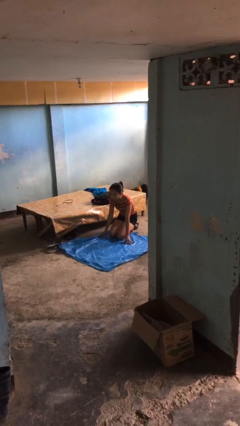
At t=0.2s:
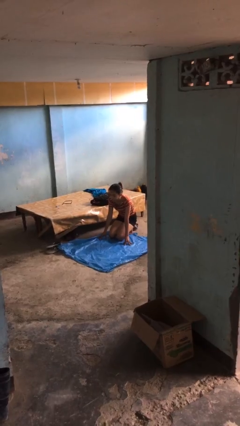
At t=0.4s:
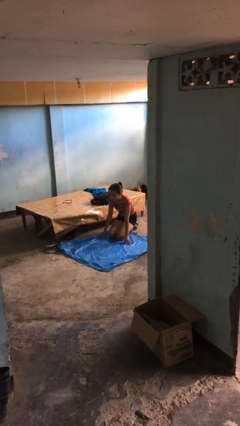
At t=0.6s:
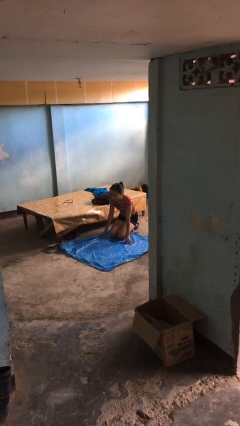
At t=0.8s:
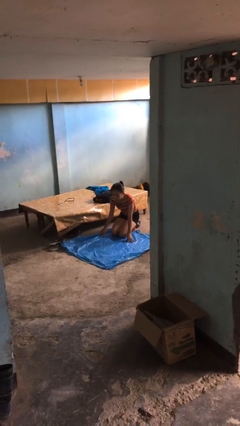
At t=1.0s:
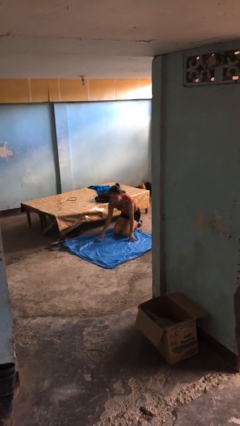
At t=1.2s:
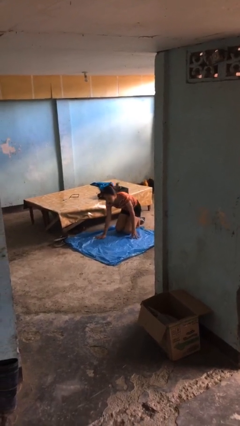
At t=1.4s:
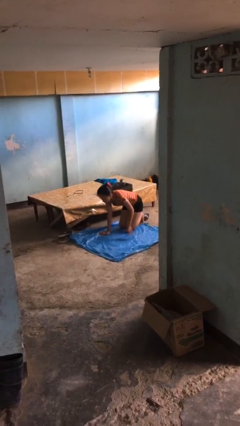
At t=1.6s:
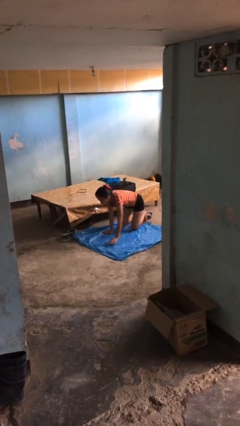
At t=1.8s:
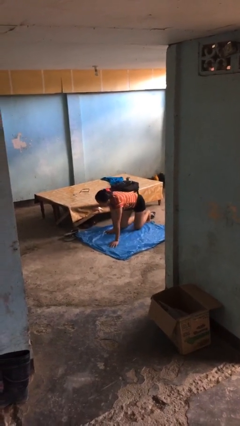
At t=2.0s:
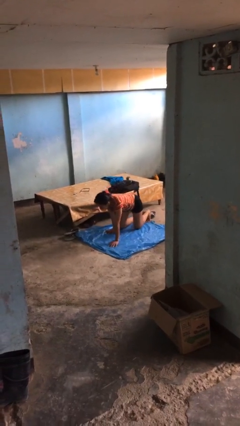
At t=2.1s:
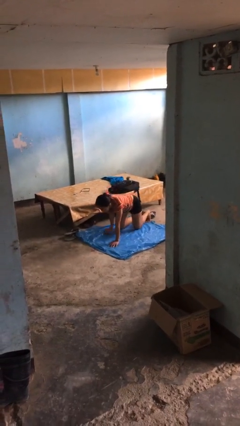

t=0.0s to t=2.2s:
person crawls

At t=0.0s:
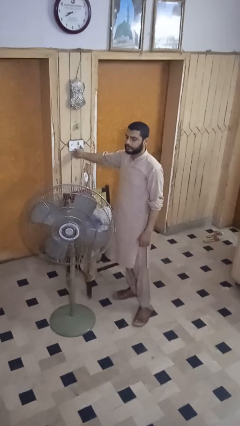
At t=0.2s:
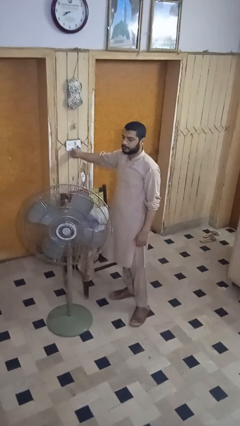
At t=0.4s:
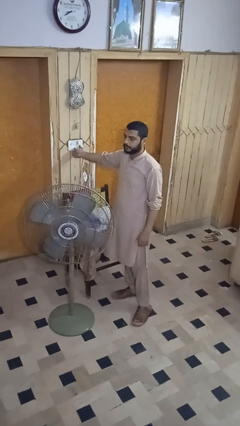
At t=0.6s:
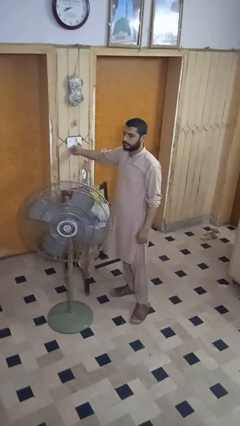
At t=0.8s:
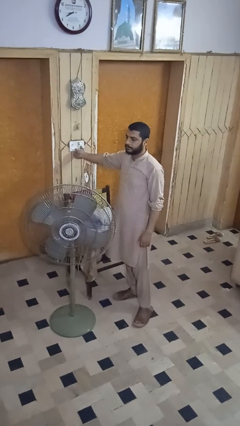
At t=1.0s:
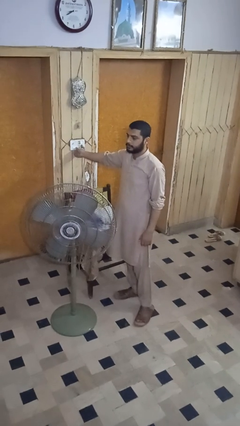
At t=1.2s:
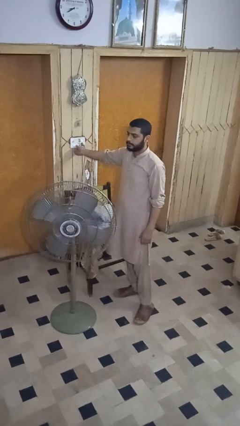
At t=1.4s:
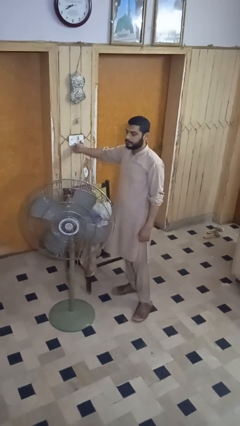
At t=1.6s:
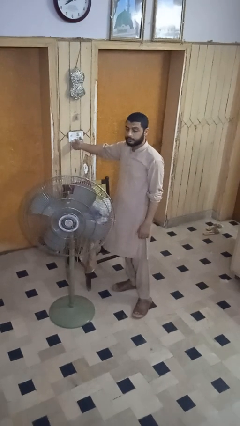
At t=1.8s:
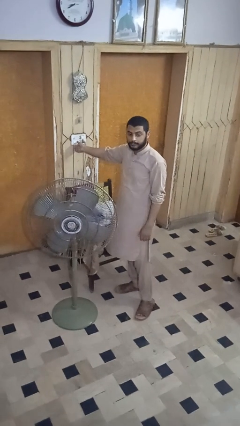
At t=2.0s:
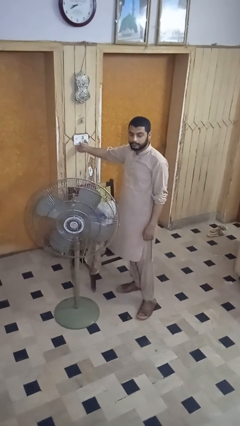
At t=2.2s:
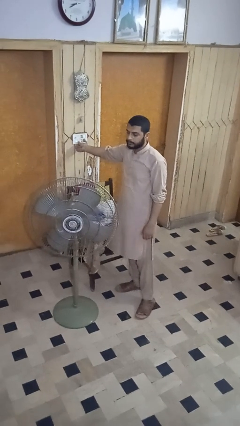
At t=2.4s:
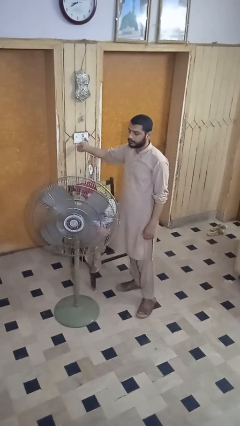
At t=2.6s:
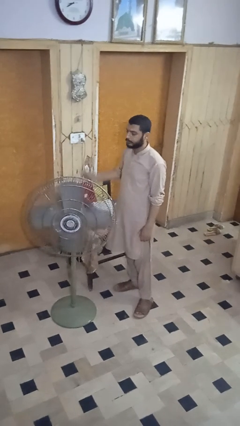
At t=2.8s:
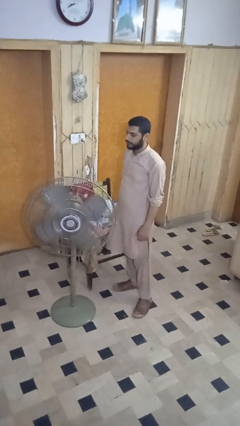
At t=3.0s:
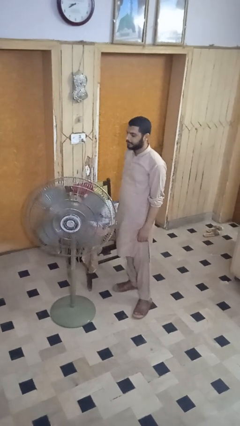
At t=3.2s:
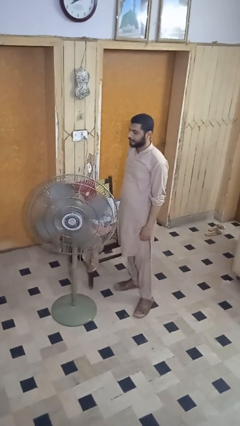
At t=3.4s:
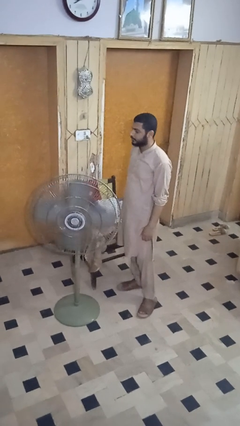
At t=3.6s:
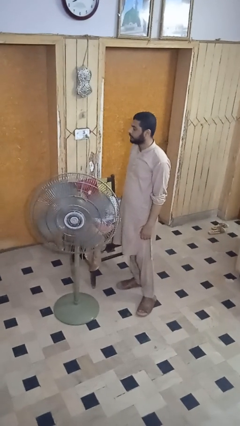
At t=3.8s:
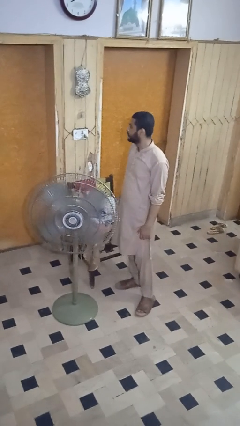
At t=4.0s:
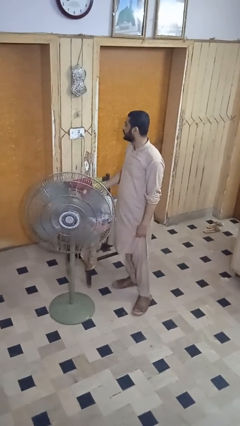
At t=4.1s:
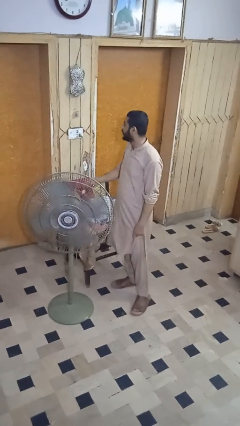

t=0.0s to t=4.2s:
person turns on fan

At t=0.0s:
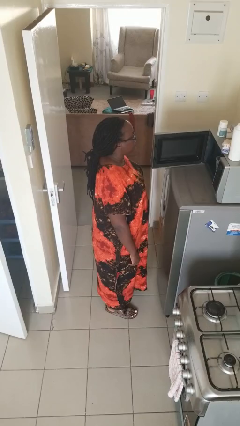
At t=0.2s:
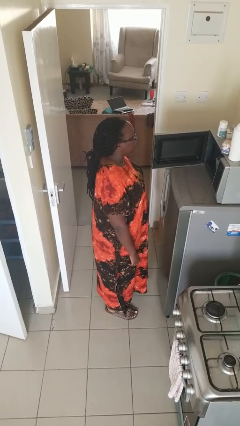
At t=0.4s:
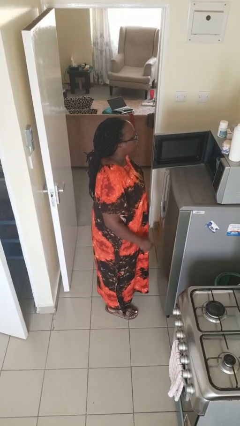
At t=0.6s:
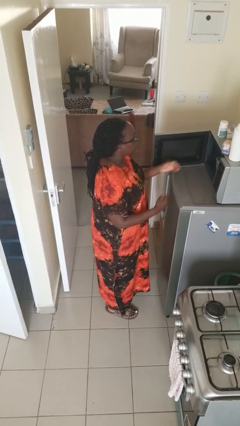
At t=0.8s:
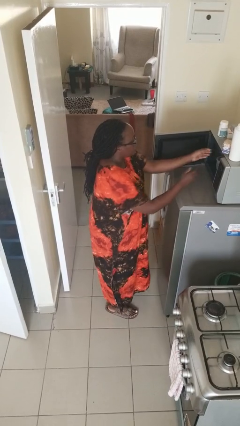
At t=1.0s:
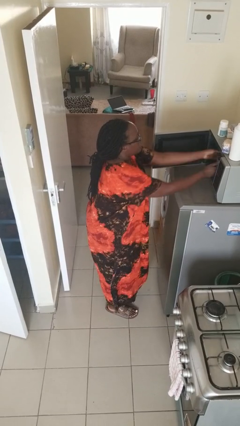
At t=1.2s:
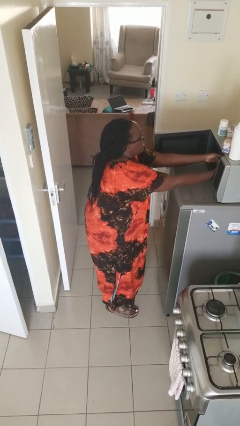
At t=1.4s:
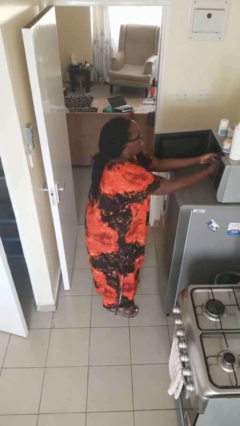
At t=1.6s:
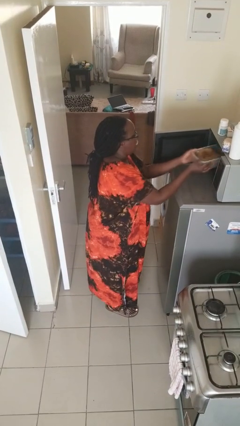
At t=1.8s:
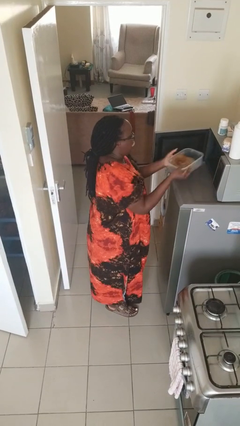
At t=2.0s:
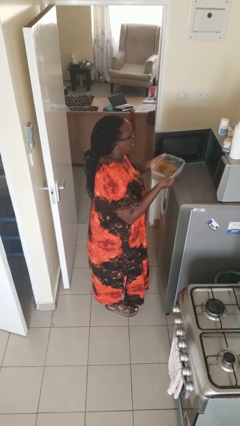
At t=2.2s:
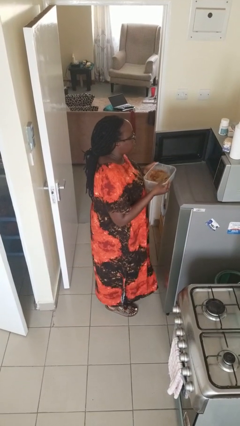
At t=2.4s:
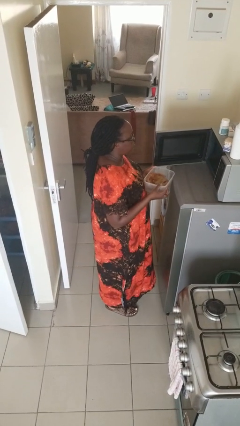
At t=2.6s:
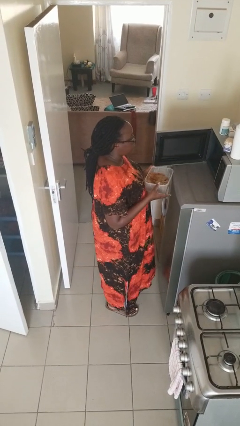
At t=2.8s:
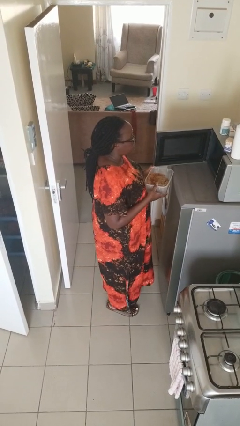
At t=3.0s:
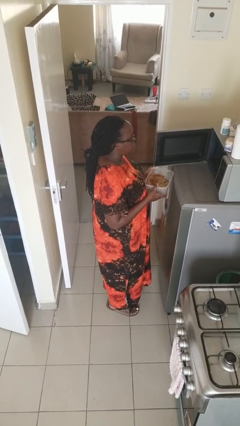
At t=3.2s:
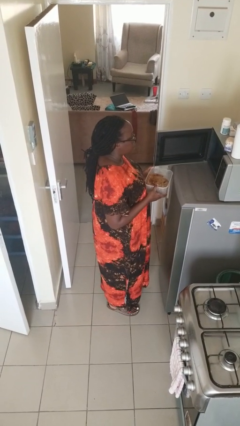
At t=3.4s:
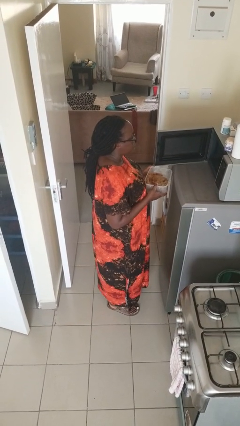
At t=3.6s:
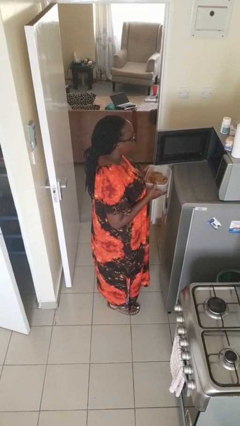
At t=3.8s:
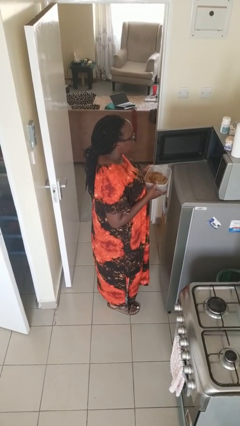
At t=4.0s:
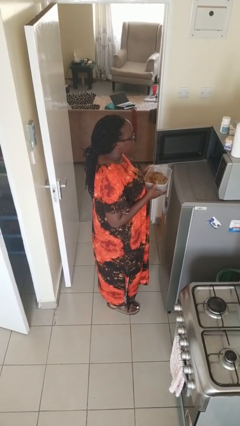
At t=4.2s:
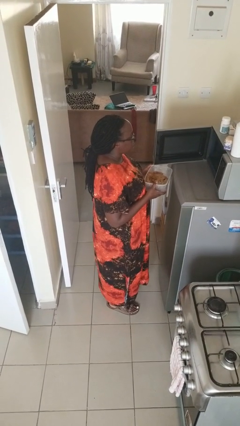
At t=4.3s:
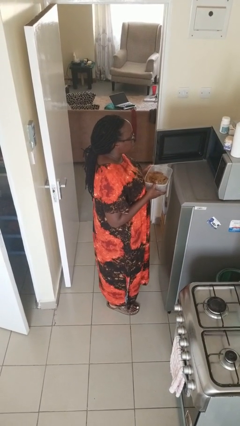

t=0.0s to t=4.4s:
person takes object from microwave

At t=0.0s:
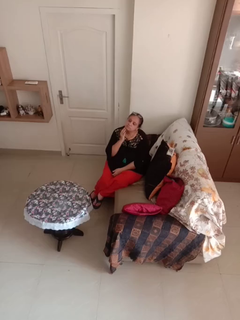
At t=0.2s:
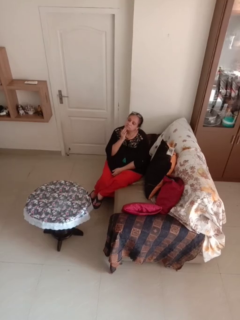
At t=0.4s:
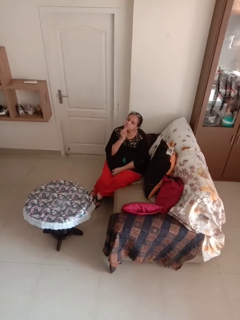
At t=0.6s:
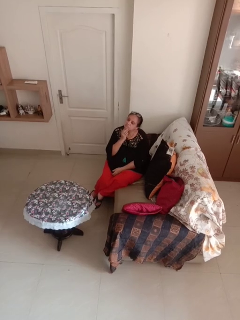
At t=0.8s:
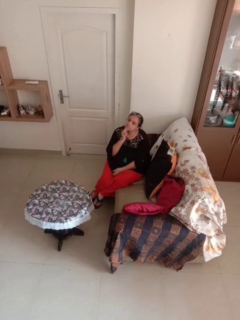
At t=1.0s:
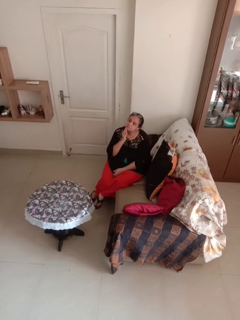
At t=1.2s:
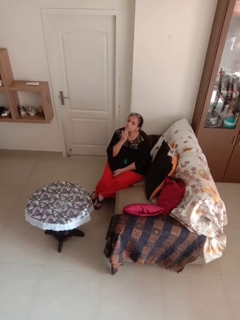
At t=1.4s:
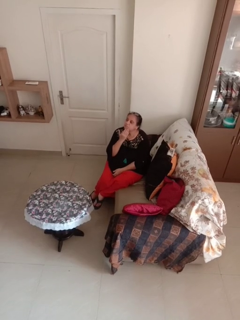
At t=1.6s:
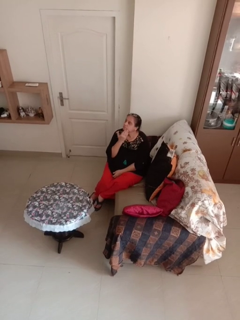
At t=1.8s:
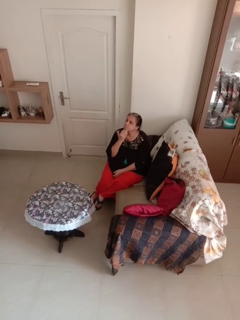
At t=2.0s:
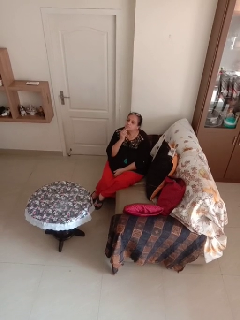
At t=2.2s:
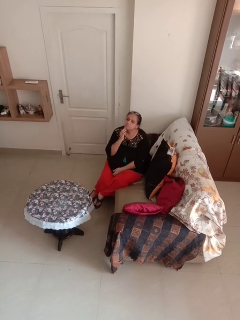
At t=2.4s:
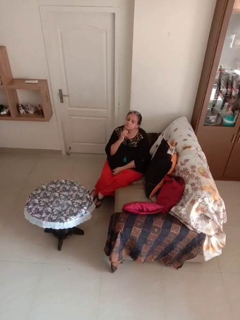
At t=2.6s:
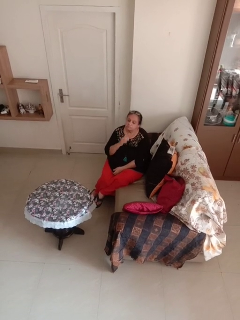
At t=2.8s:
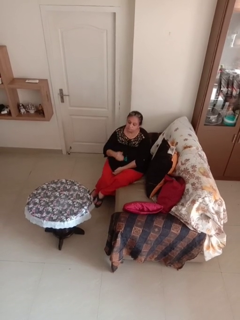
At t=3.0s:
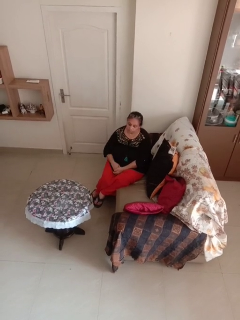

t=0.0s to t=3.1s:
person strokes chin

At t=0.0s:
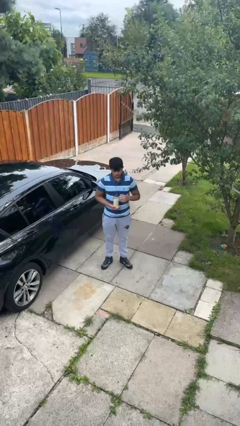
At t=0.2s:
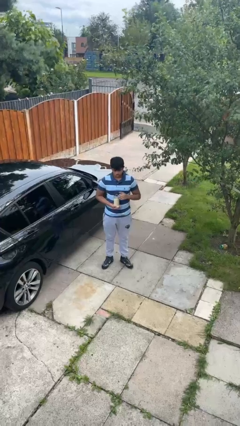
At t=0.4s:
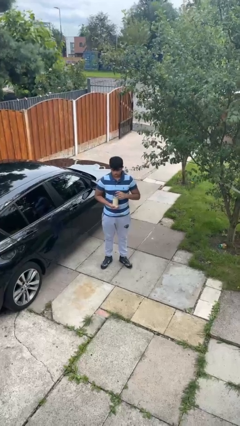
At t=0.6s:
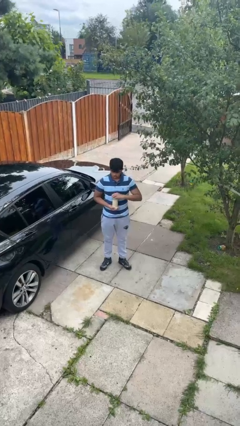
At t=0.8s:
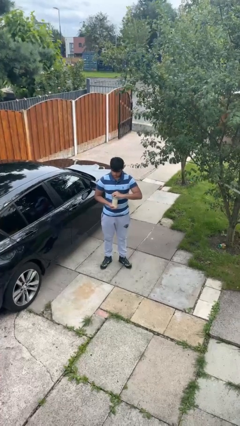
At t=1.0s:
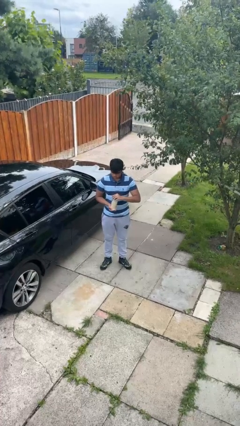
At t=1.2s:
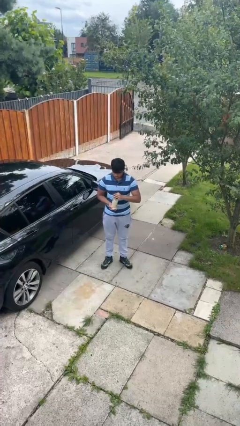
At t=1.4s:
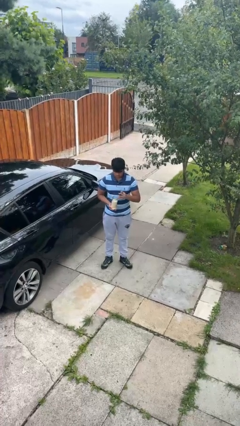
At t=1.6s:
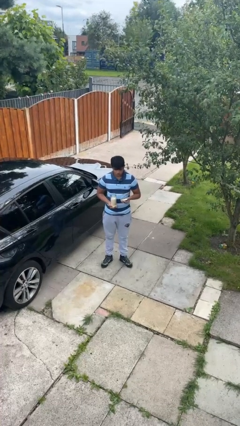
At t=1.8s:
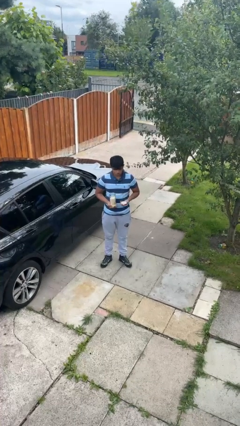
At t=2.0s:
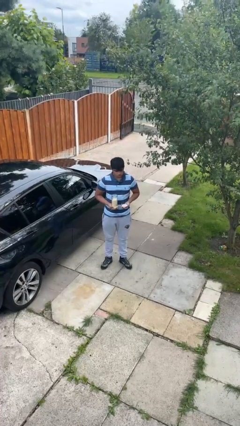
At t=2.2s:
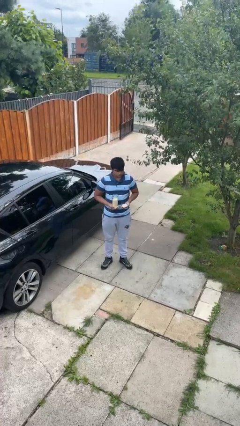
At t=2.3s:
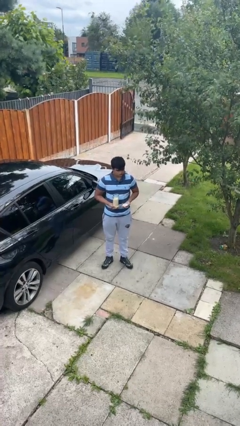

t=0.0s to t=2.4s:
person opens jar

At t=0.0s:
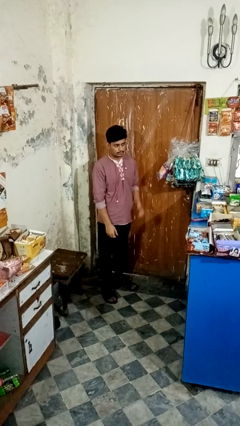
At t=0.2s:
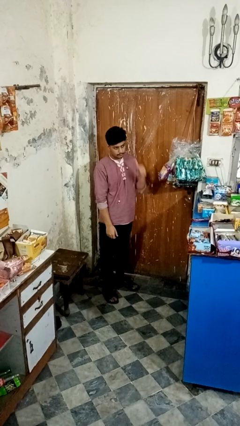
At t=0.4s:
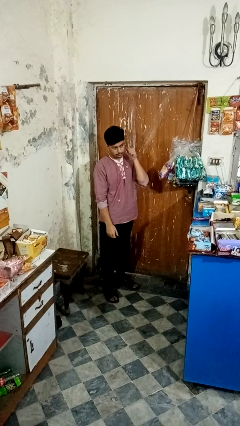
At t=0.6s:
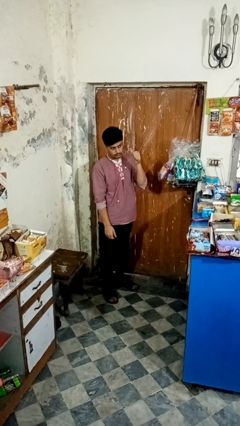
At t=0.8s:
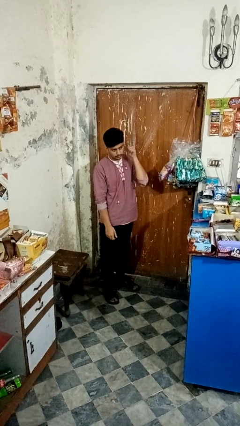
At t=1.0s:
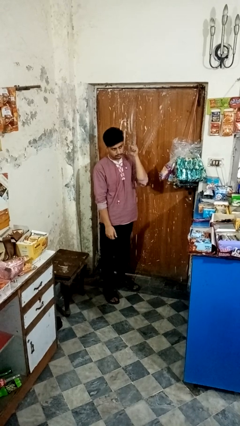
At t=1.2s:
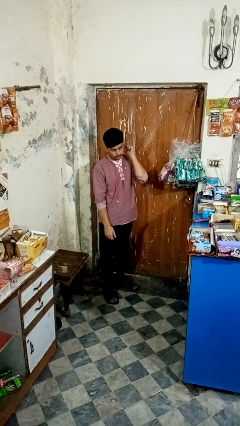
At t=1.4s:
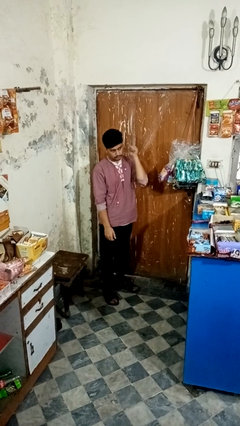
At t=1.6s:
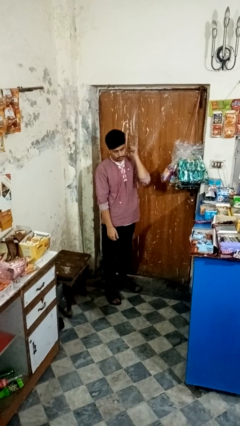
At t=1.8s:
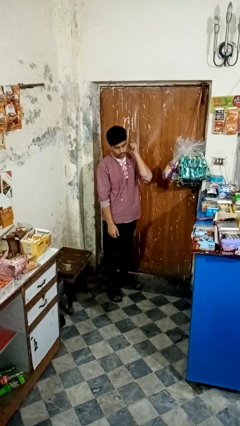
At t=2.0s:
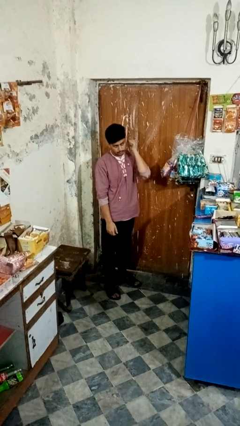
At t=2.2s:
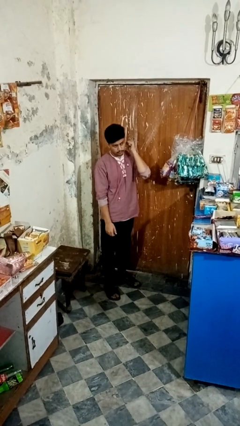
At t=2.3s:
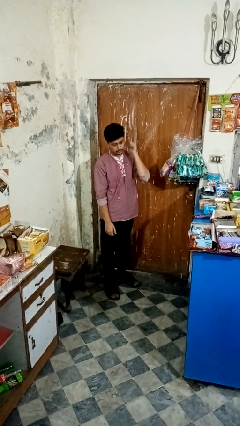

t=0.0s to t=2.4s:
person gestures behind me
